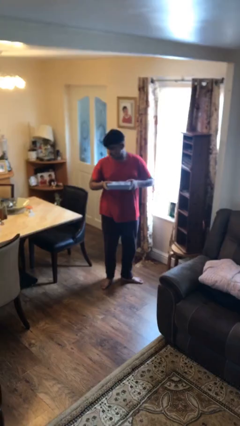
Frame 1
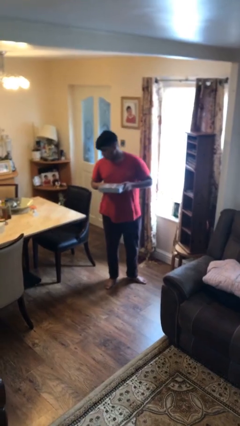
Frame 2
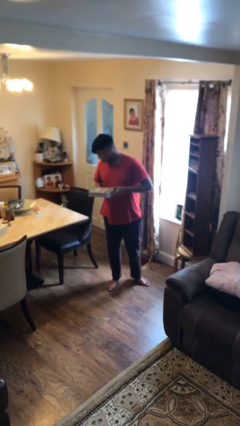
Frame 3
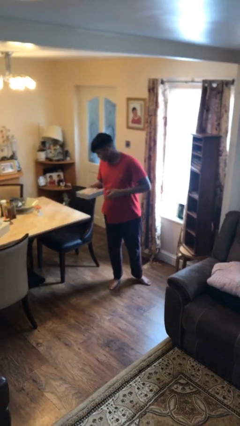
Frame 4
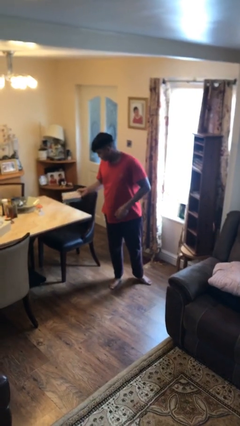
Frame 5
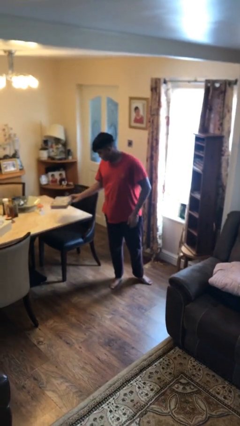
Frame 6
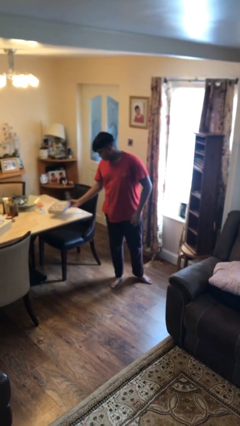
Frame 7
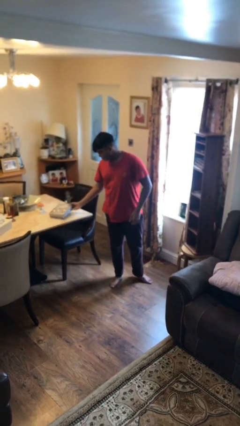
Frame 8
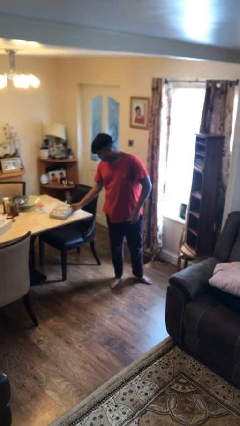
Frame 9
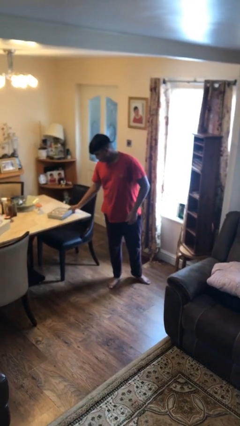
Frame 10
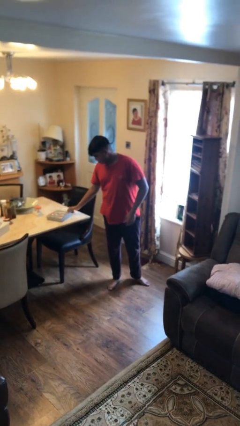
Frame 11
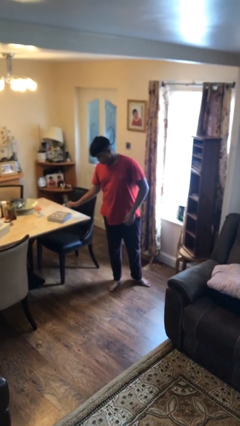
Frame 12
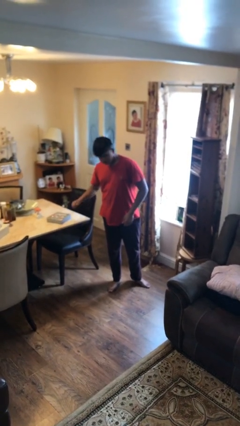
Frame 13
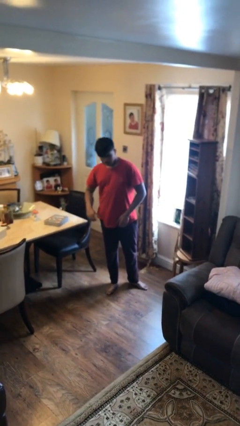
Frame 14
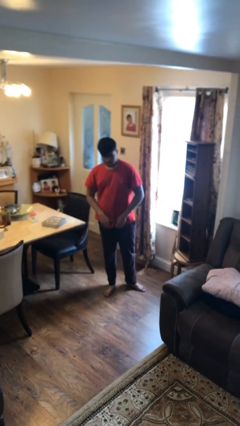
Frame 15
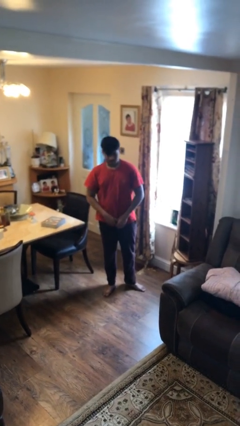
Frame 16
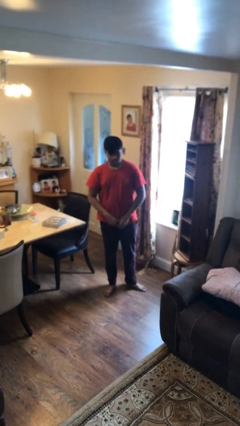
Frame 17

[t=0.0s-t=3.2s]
person puts down object on table

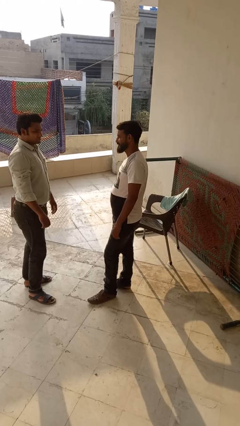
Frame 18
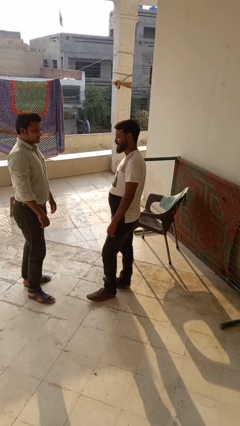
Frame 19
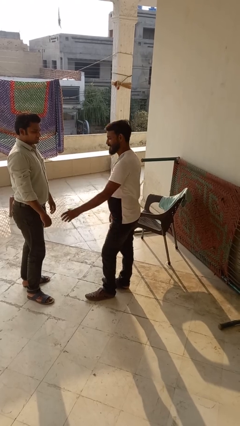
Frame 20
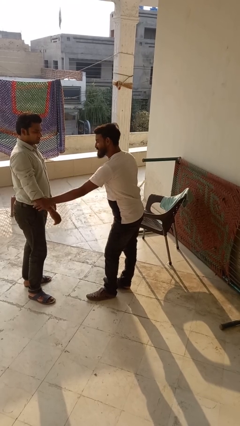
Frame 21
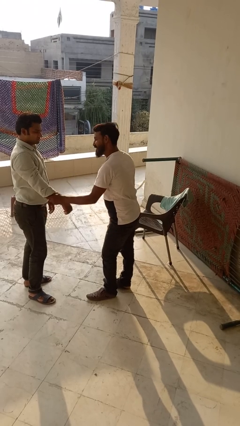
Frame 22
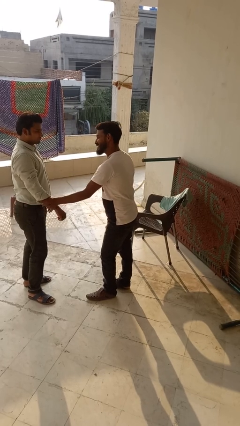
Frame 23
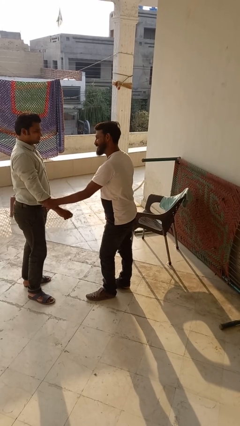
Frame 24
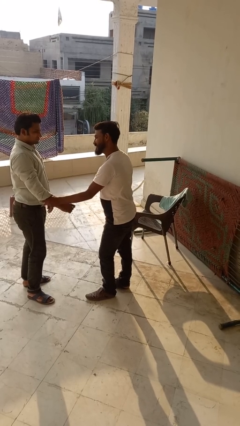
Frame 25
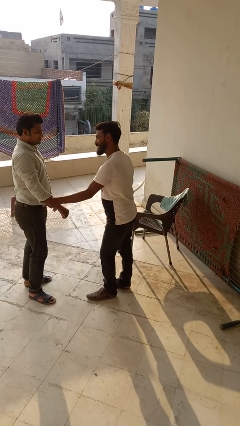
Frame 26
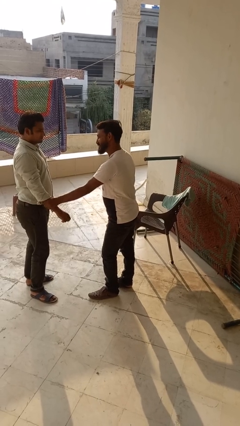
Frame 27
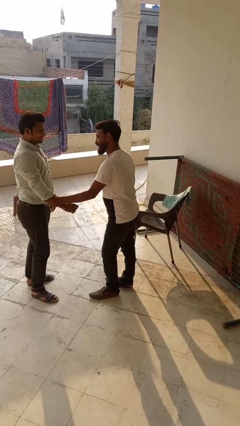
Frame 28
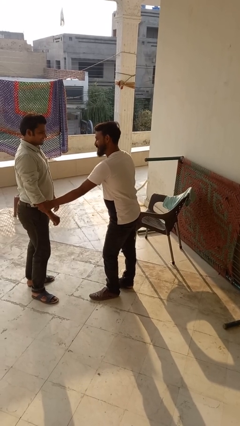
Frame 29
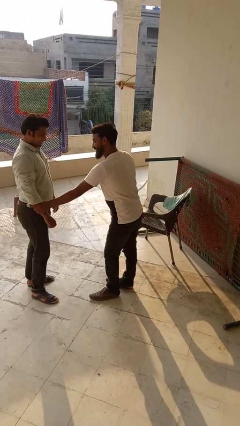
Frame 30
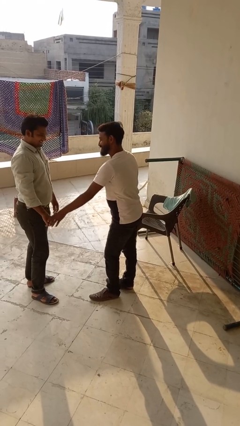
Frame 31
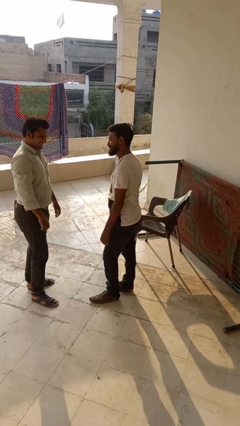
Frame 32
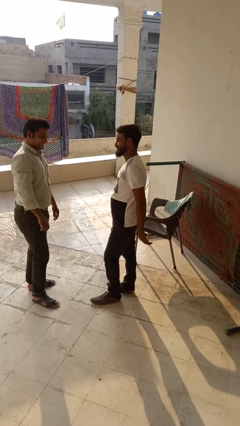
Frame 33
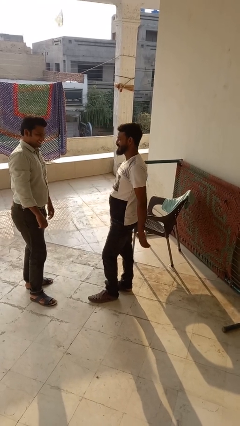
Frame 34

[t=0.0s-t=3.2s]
person grabs person by forearm

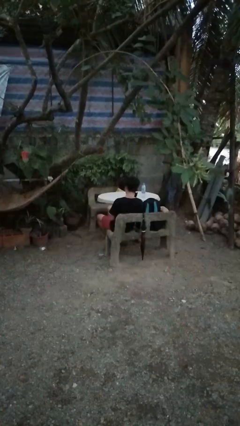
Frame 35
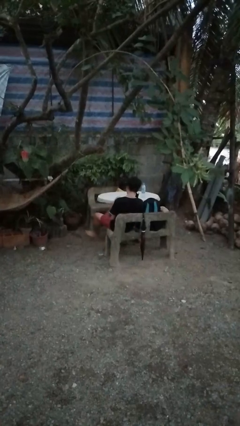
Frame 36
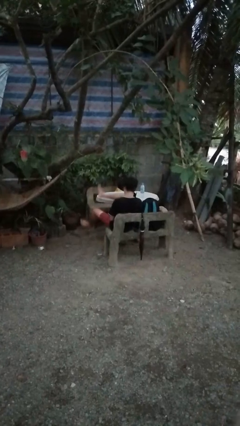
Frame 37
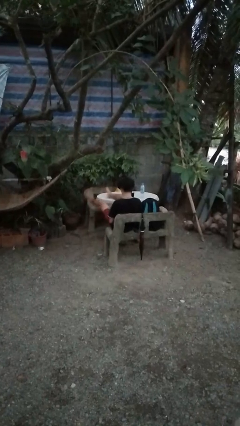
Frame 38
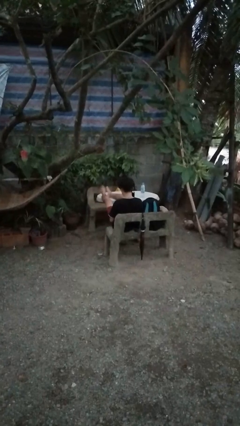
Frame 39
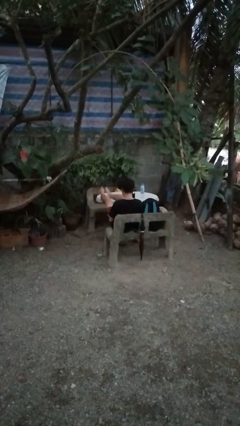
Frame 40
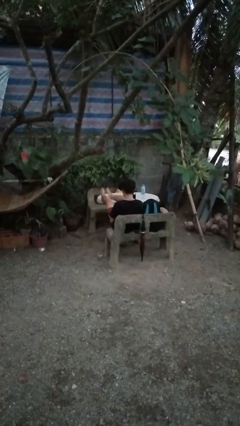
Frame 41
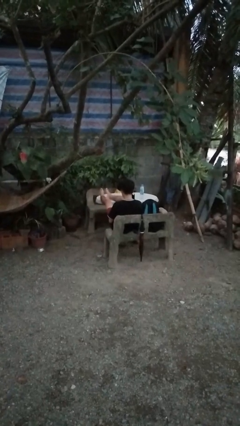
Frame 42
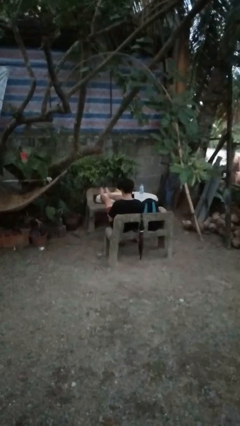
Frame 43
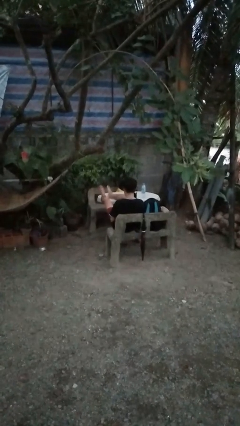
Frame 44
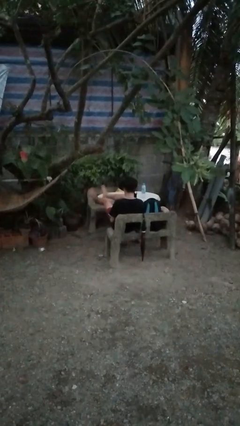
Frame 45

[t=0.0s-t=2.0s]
person puts feet up

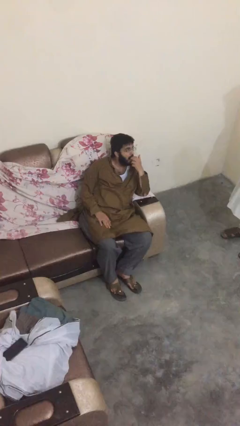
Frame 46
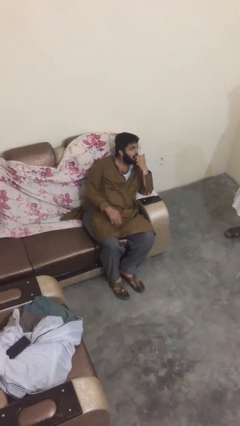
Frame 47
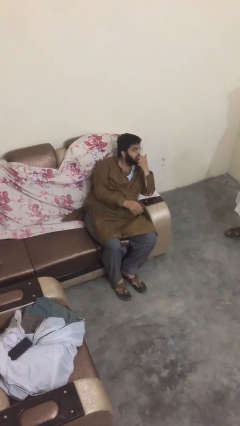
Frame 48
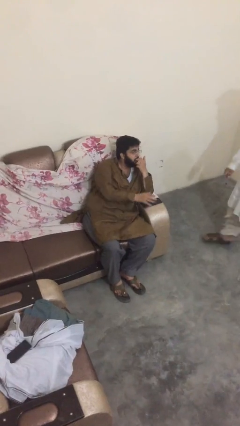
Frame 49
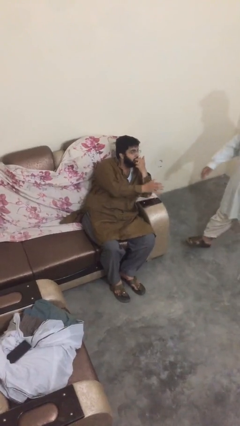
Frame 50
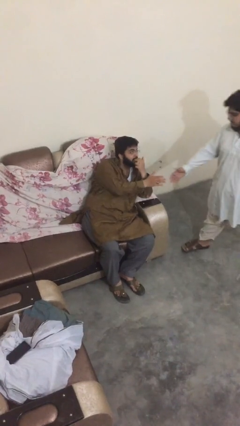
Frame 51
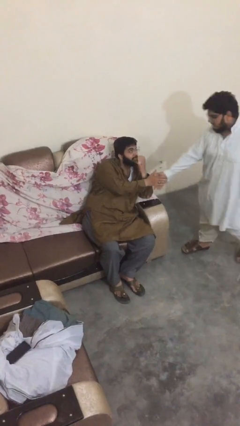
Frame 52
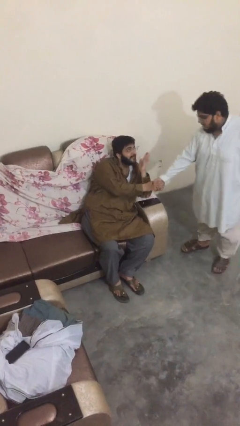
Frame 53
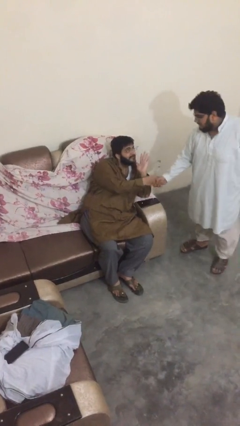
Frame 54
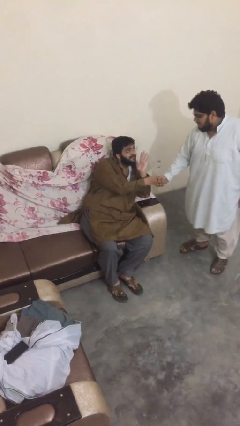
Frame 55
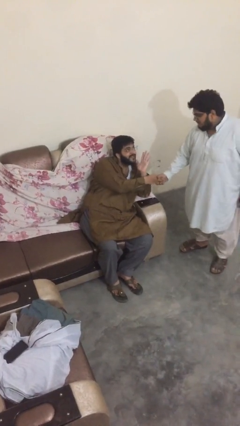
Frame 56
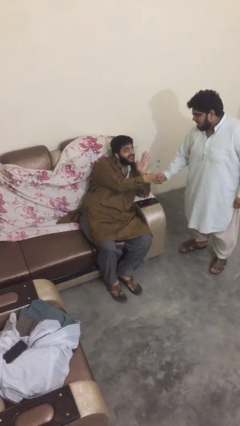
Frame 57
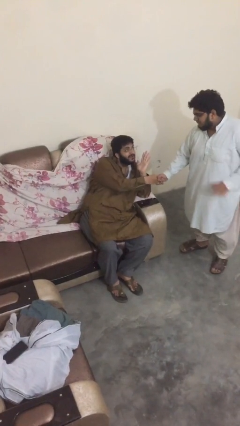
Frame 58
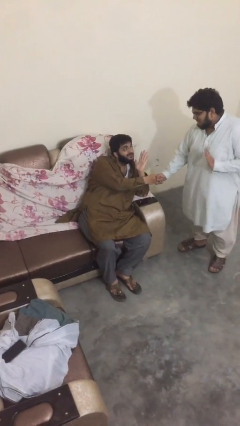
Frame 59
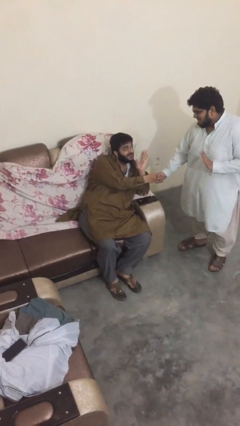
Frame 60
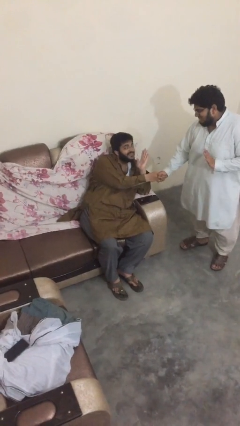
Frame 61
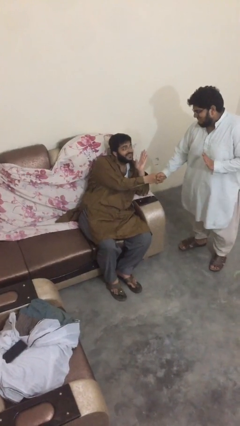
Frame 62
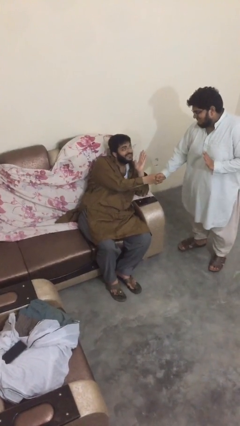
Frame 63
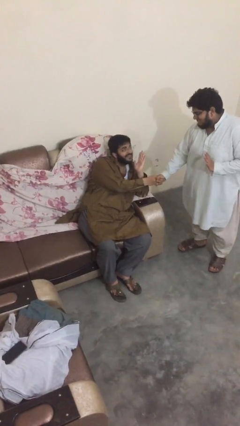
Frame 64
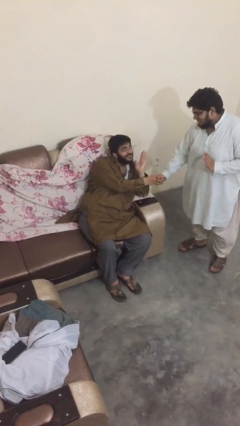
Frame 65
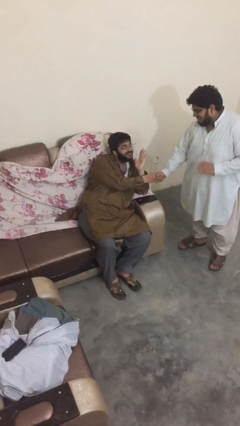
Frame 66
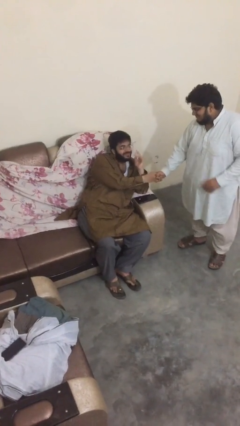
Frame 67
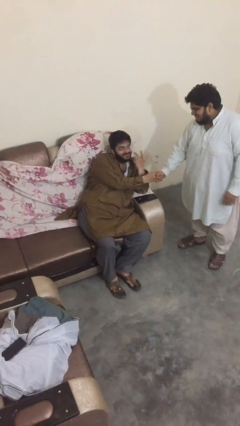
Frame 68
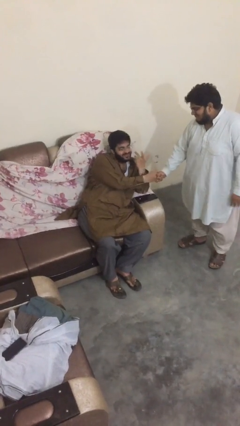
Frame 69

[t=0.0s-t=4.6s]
person shakes hand

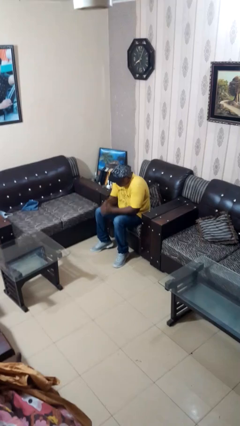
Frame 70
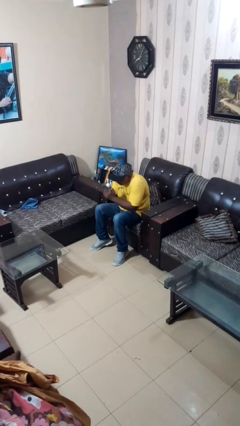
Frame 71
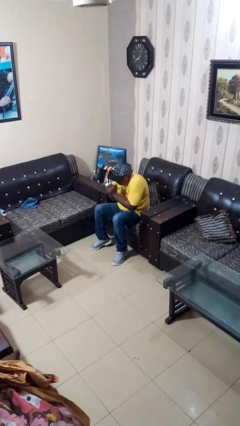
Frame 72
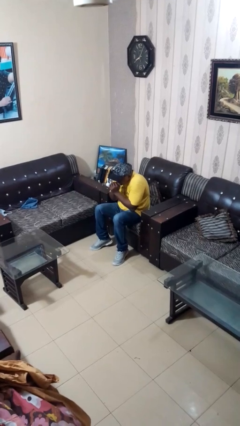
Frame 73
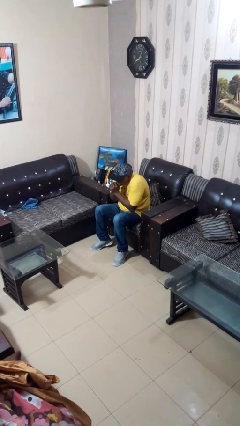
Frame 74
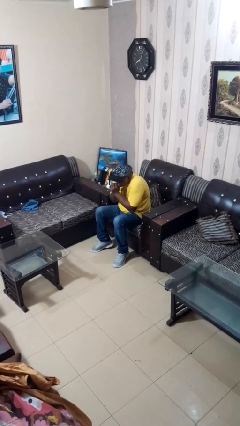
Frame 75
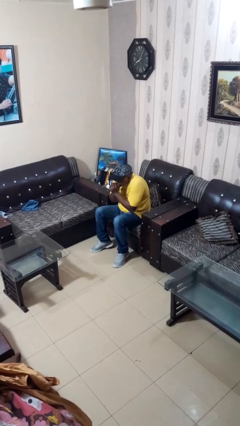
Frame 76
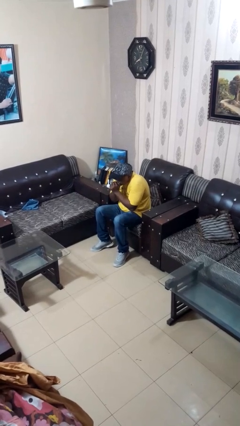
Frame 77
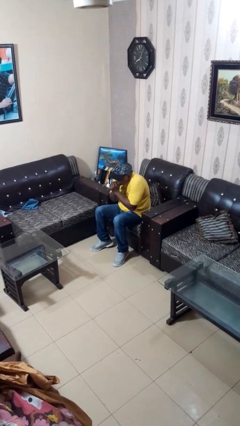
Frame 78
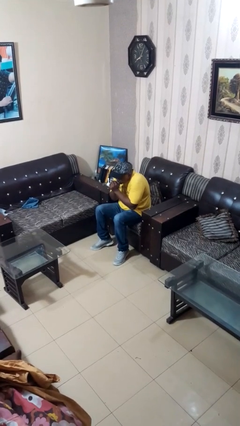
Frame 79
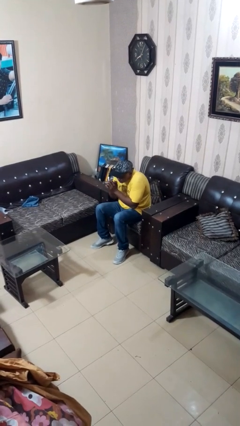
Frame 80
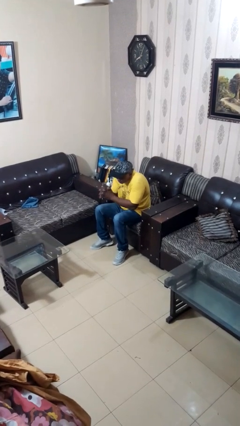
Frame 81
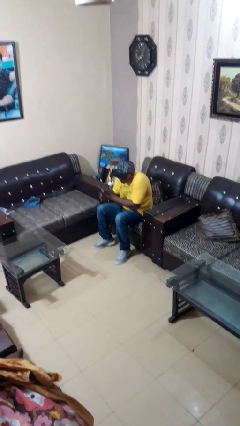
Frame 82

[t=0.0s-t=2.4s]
person blows into hands

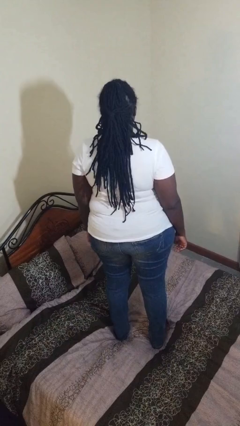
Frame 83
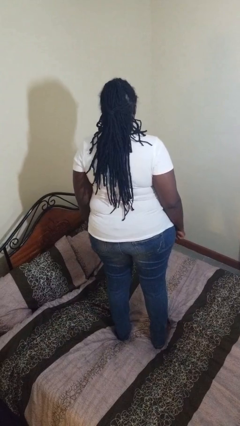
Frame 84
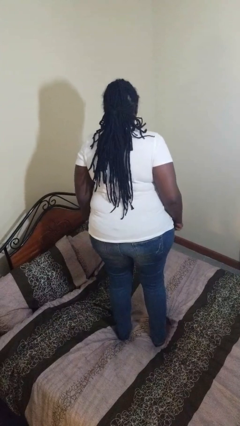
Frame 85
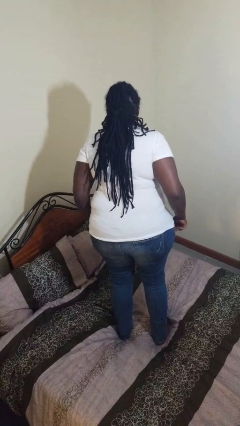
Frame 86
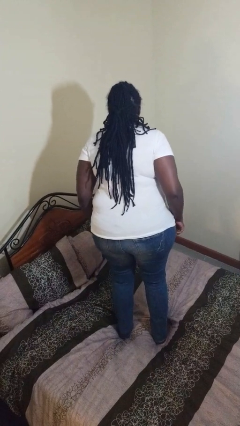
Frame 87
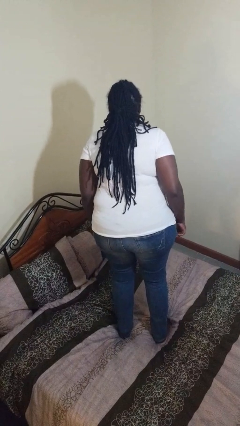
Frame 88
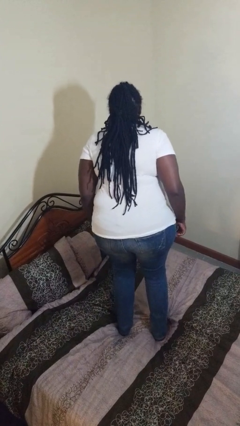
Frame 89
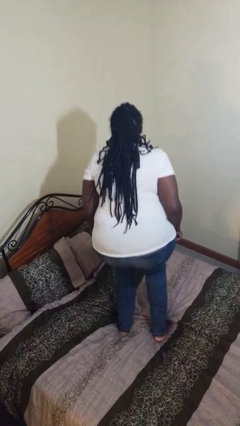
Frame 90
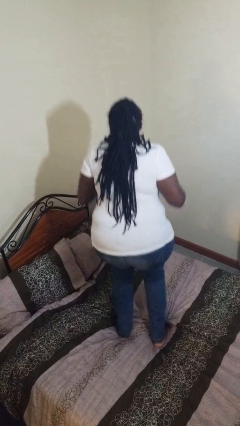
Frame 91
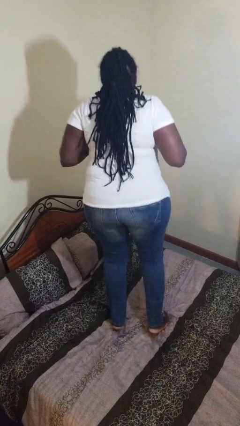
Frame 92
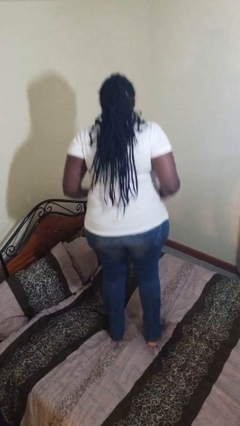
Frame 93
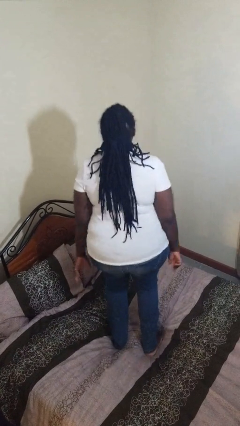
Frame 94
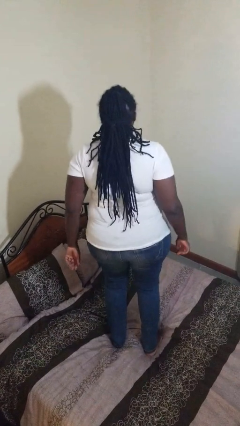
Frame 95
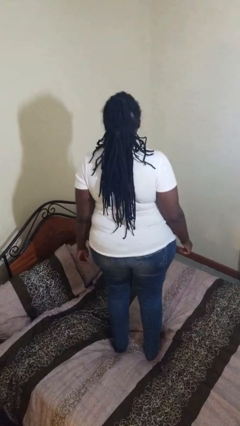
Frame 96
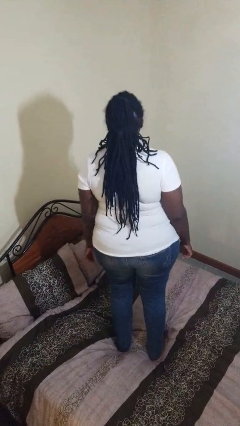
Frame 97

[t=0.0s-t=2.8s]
person jumps on bed
